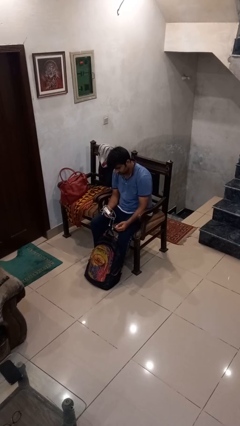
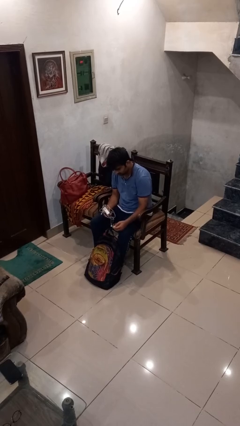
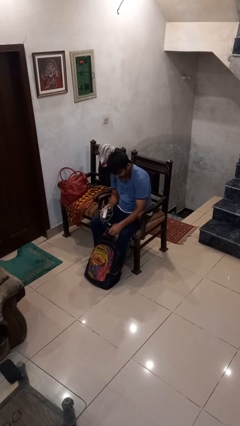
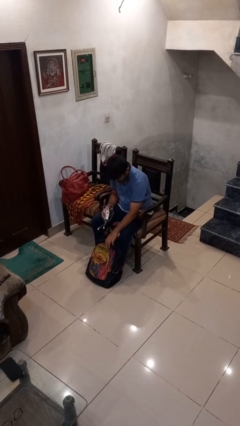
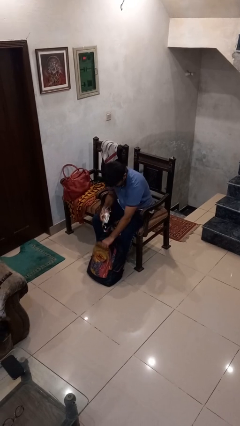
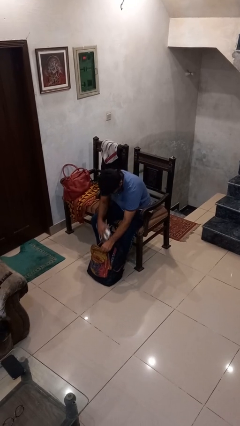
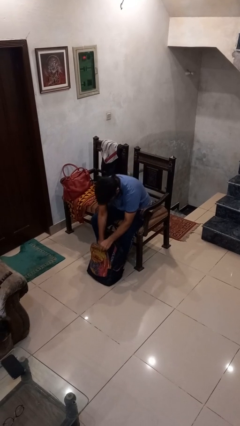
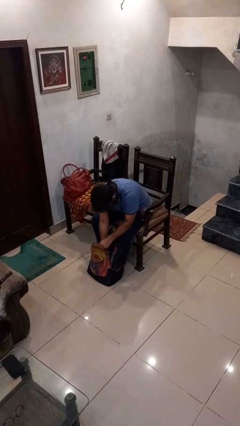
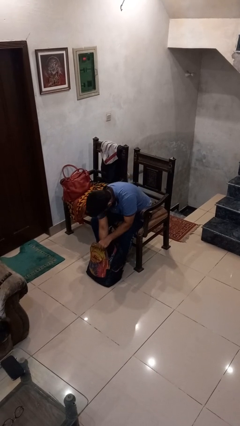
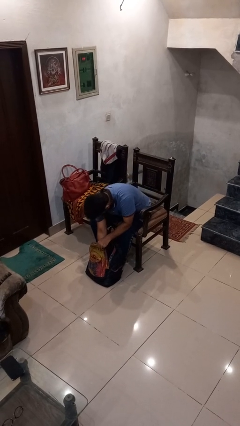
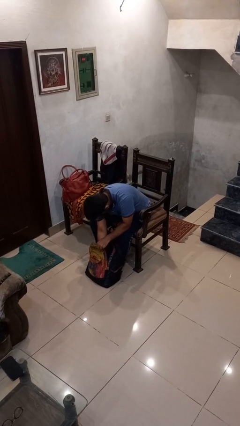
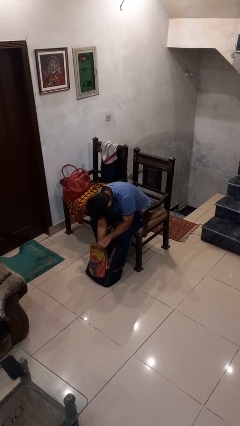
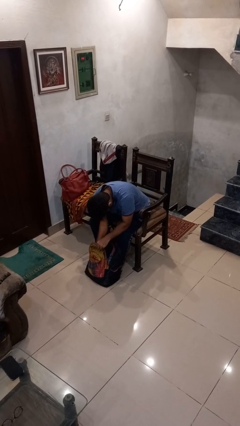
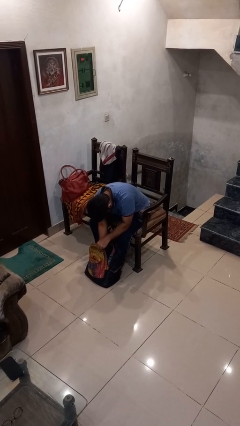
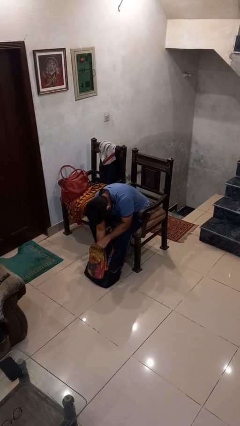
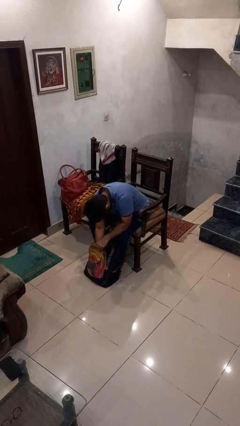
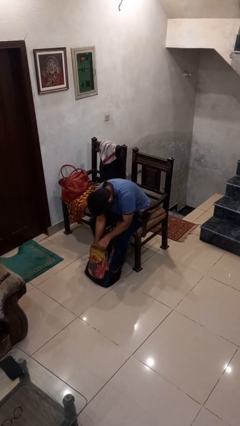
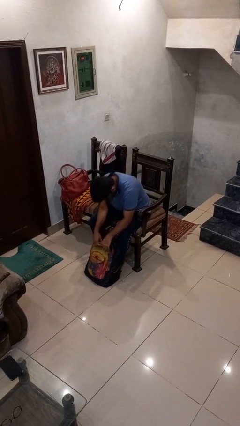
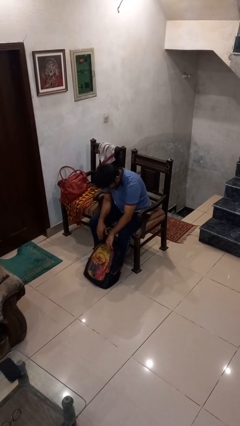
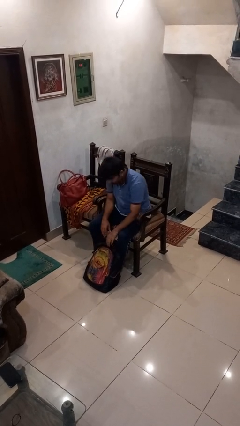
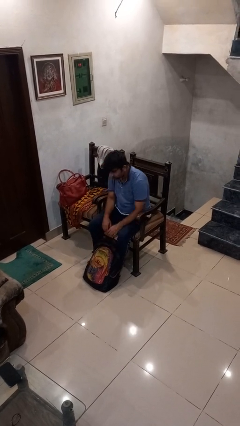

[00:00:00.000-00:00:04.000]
person puts object into backpack

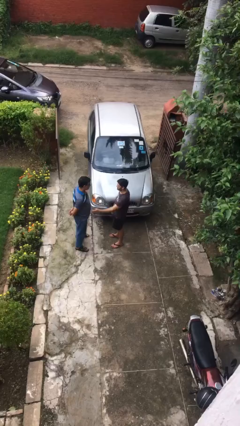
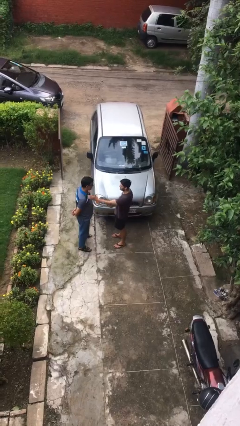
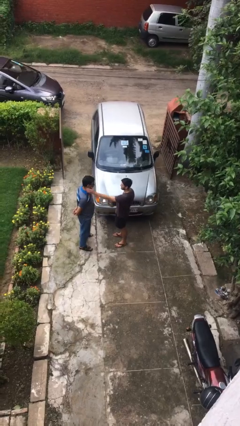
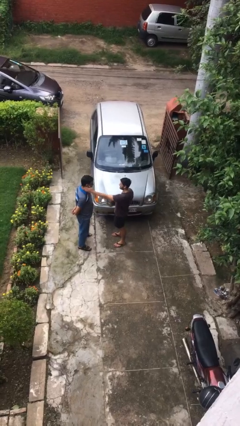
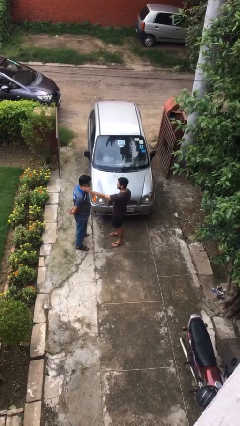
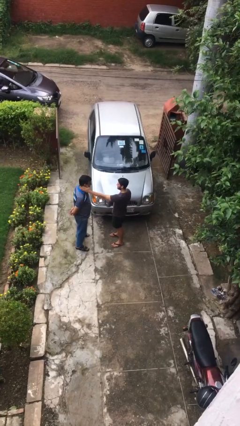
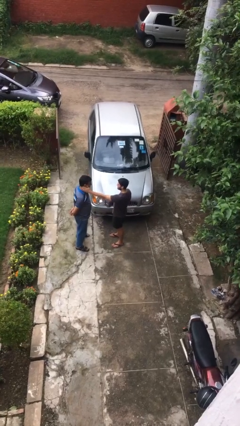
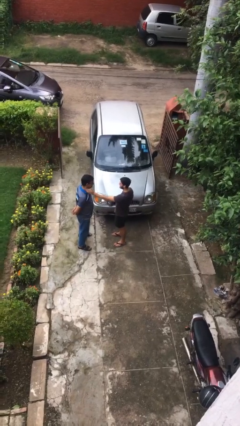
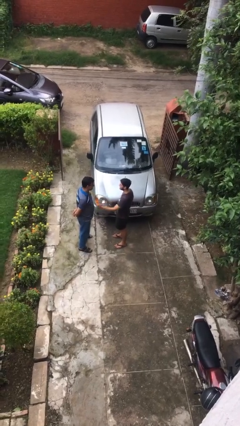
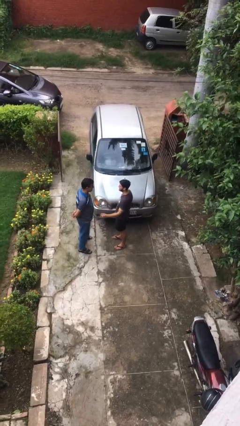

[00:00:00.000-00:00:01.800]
person touches face of person

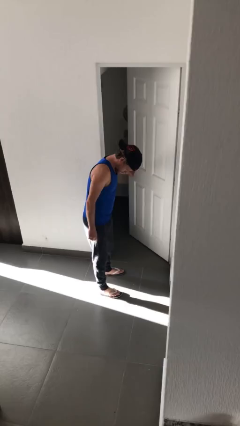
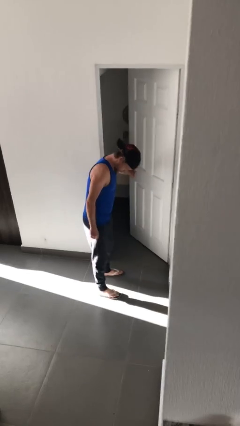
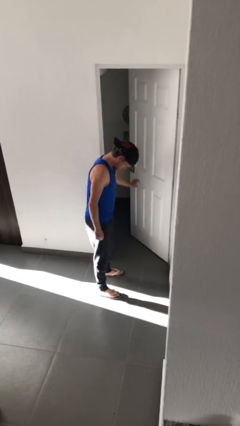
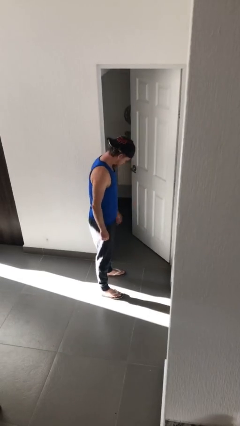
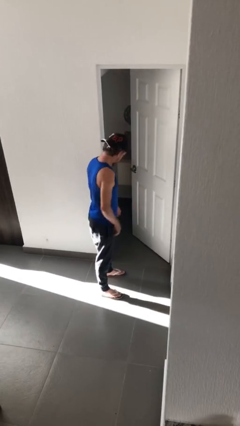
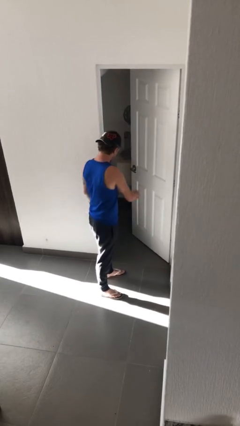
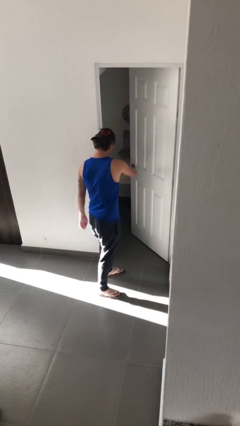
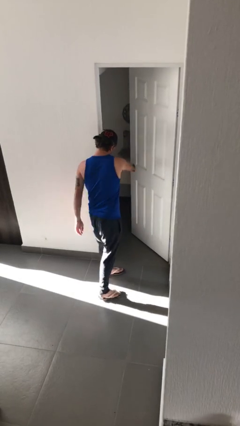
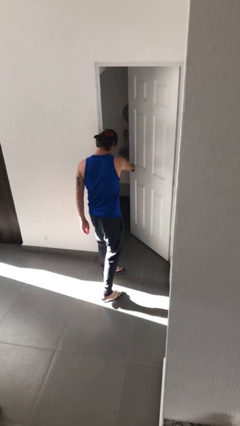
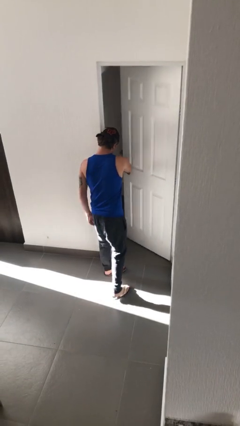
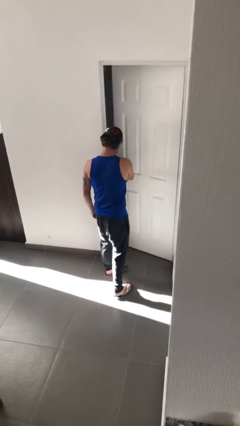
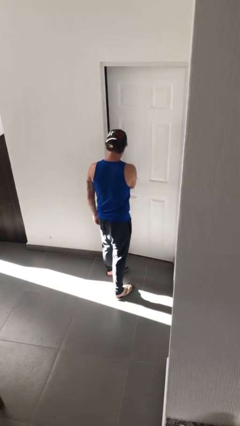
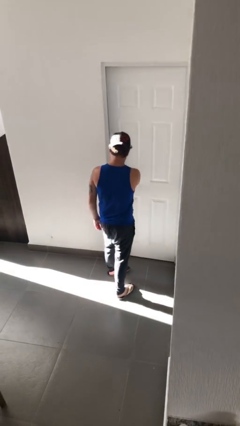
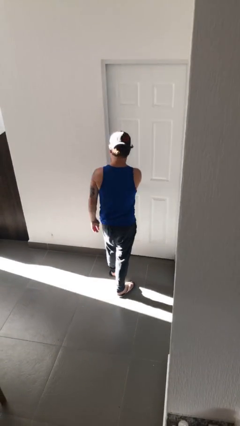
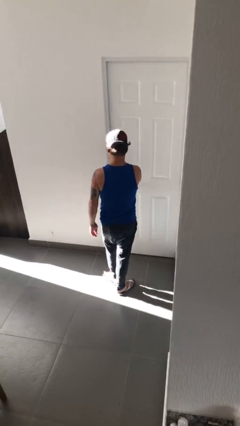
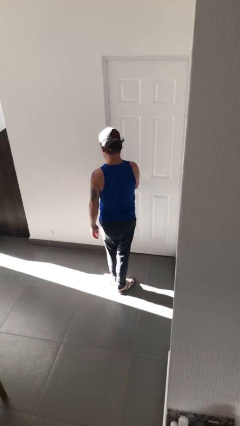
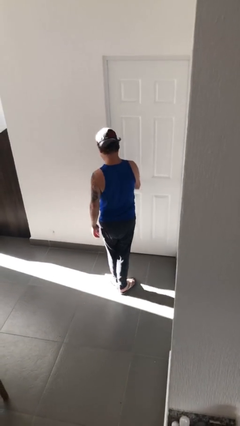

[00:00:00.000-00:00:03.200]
person closes facility door

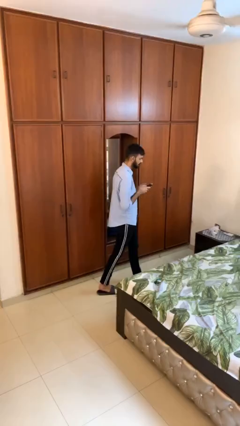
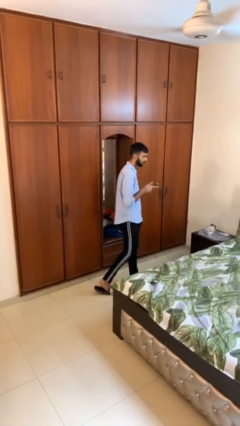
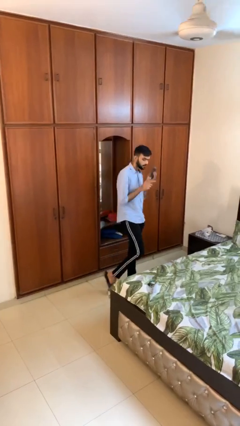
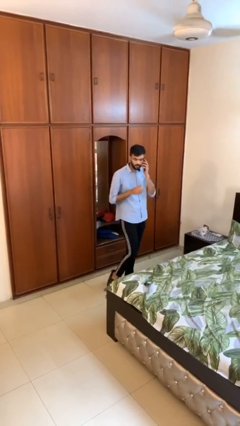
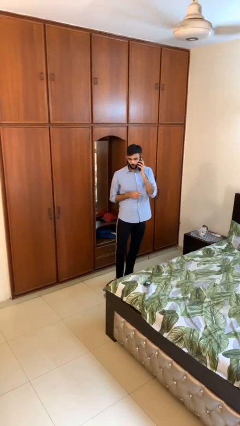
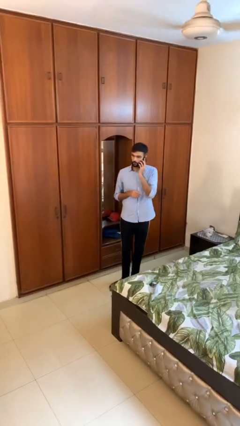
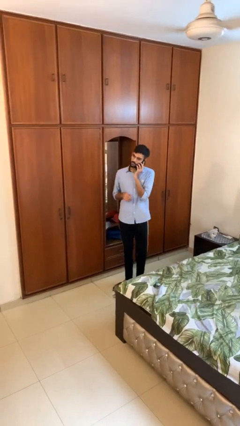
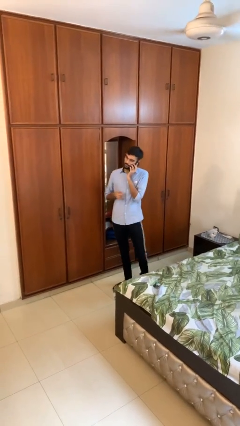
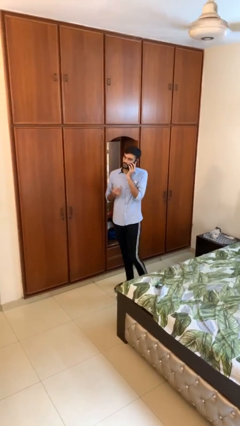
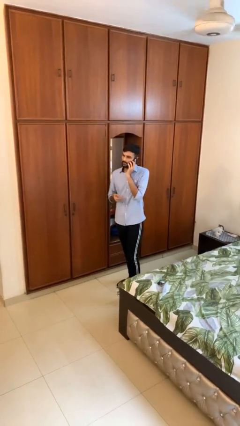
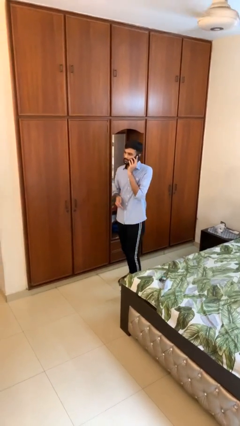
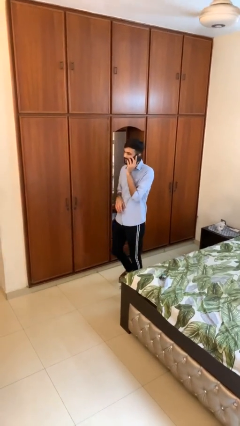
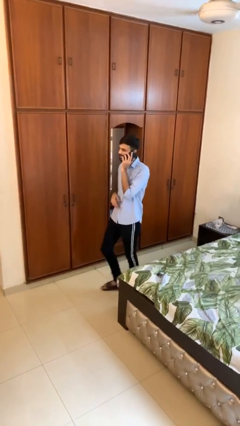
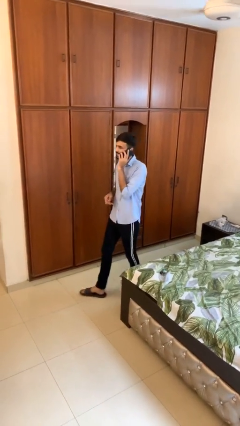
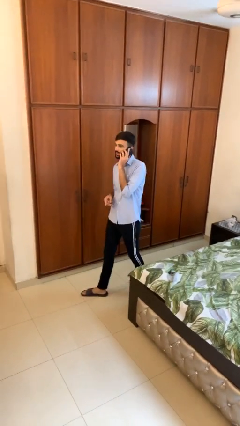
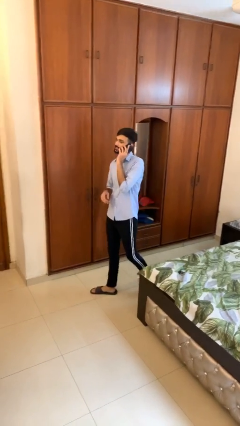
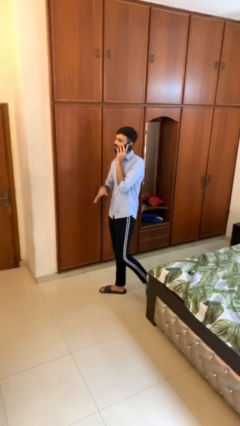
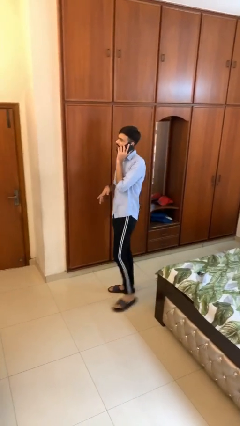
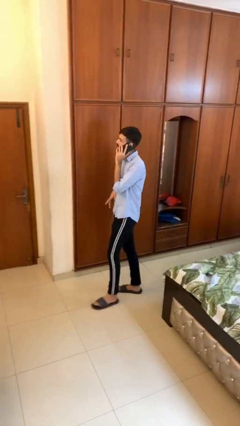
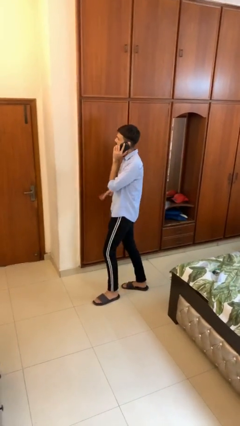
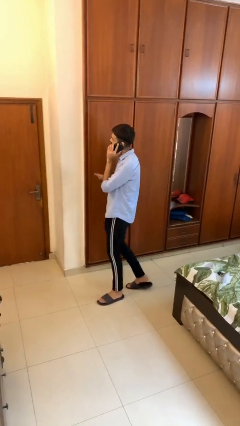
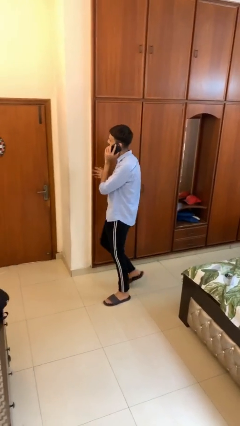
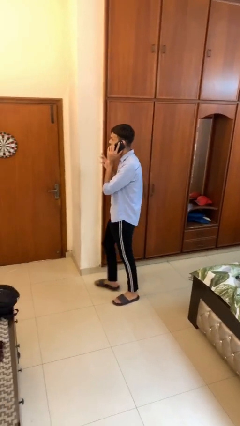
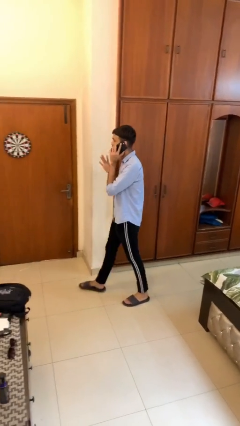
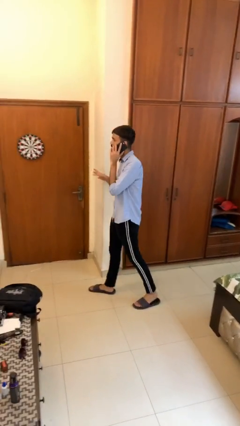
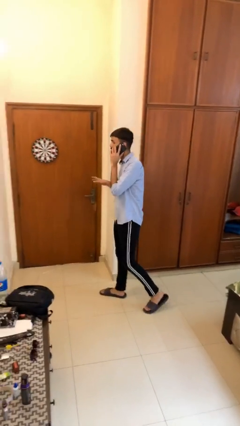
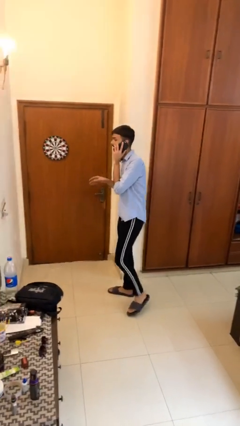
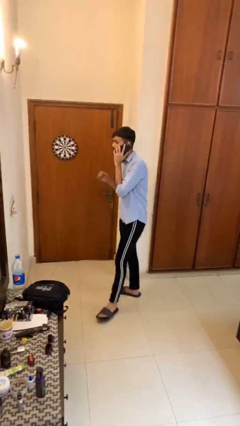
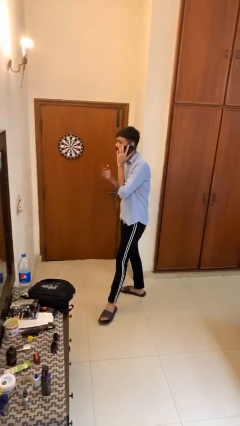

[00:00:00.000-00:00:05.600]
person talks on phone

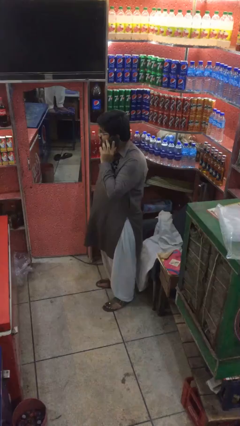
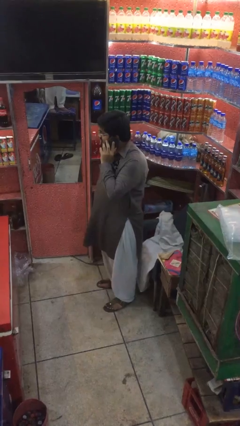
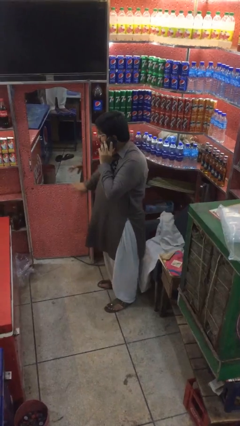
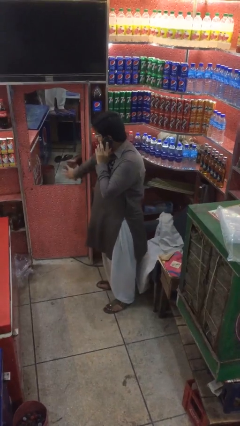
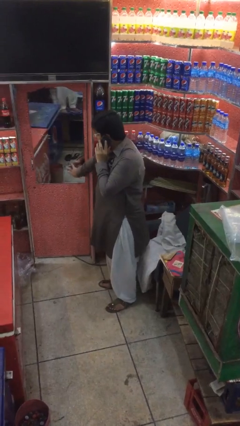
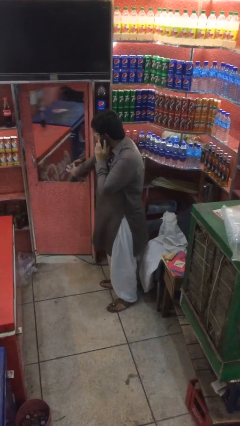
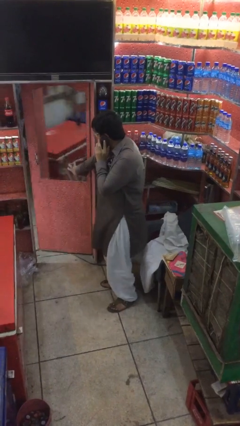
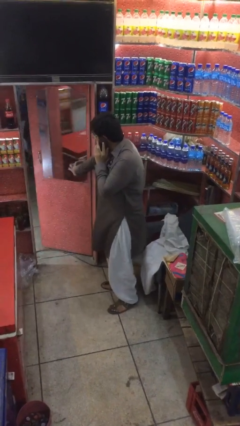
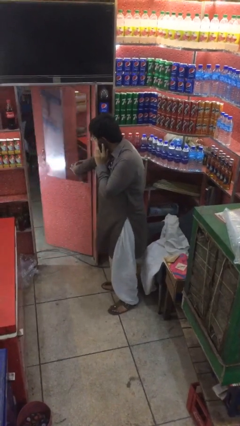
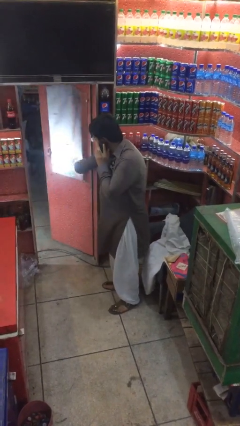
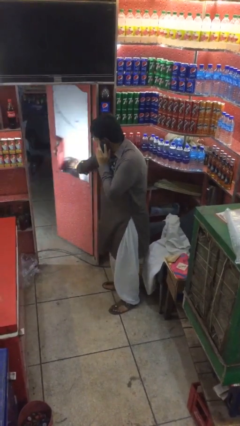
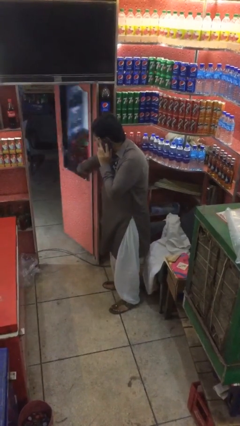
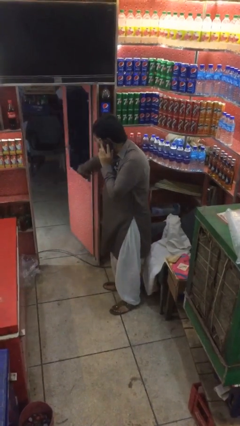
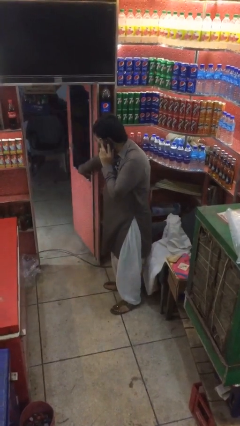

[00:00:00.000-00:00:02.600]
person opens facility door

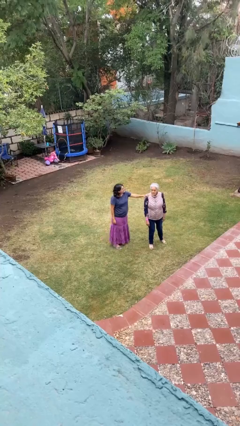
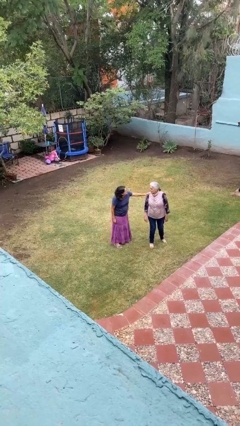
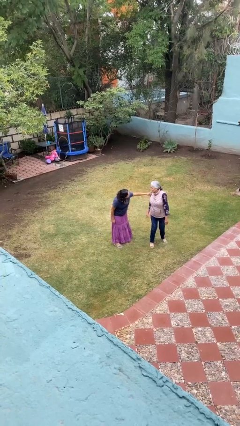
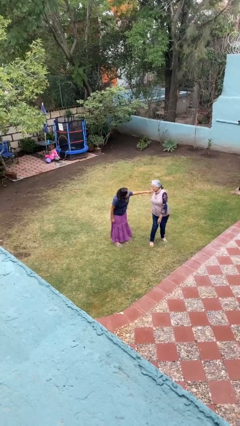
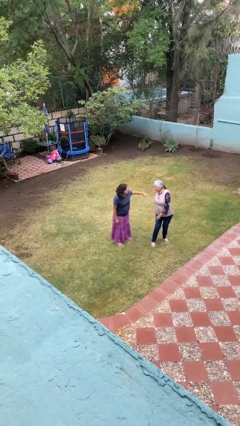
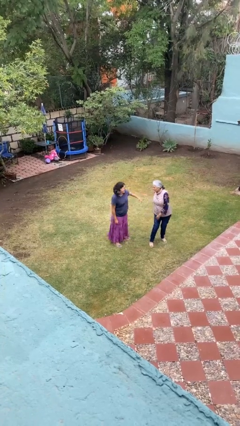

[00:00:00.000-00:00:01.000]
person spins person around
